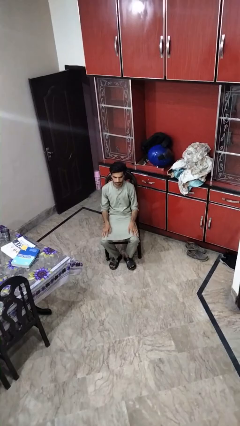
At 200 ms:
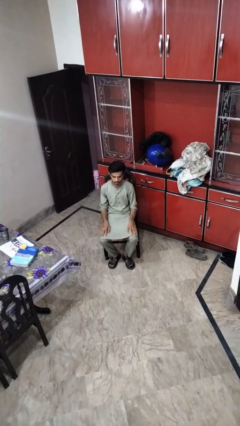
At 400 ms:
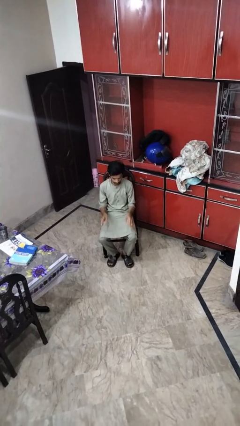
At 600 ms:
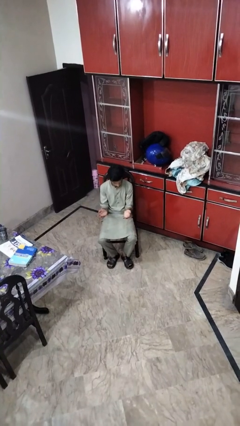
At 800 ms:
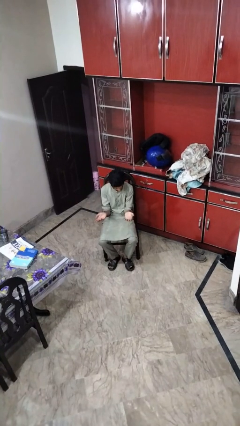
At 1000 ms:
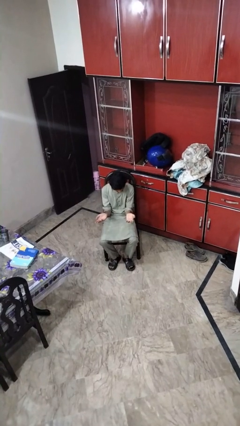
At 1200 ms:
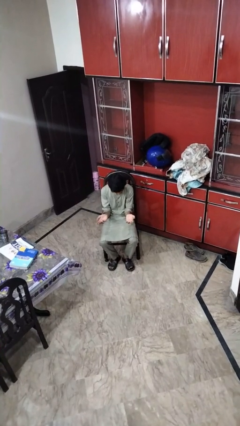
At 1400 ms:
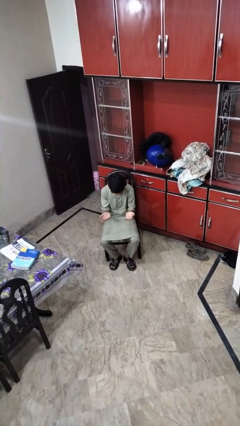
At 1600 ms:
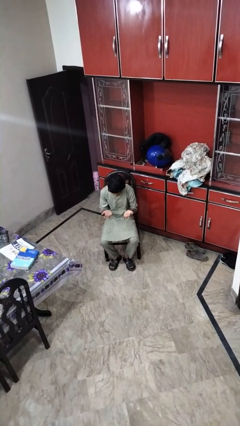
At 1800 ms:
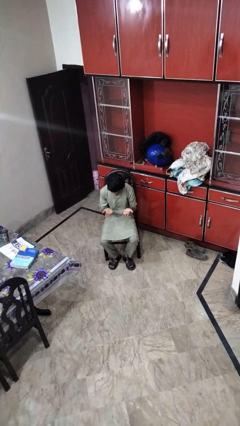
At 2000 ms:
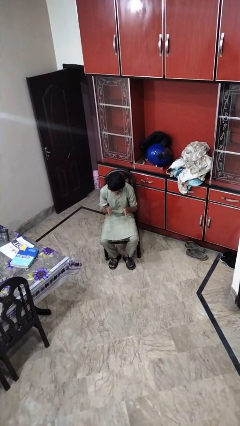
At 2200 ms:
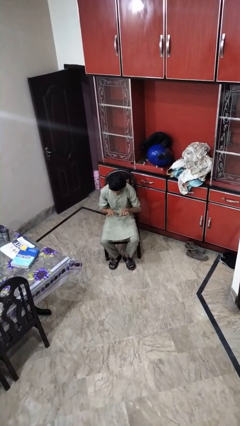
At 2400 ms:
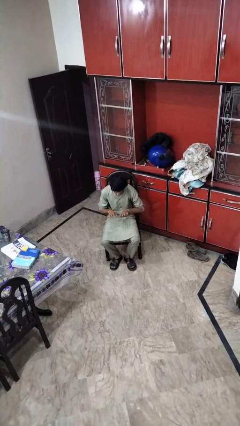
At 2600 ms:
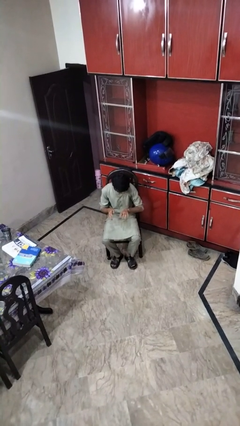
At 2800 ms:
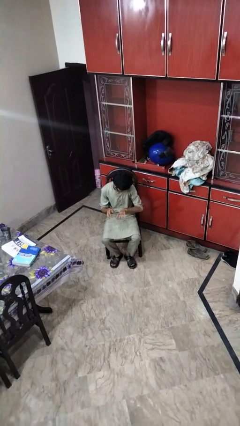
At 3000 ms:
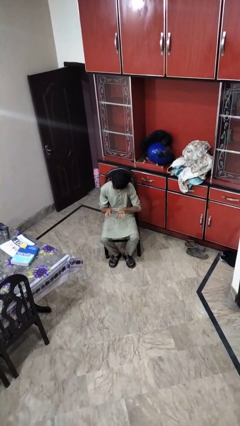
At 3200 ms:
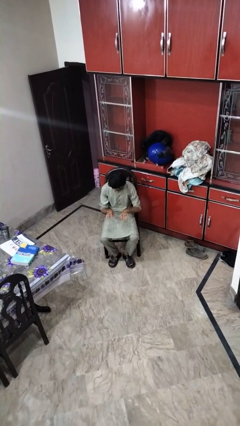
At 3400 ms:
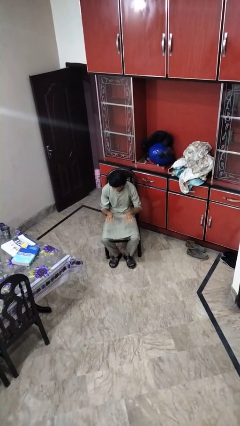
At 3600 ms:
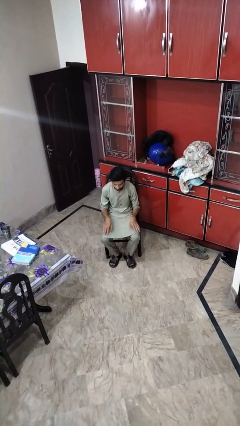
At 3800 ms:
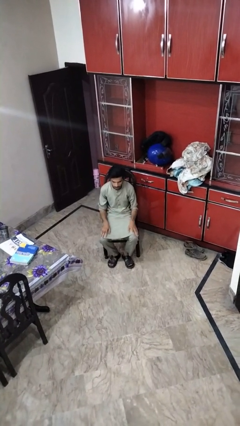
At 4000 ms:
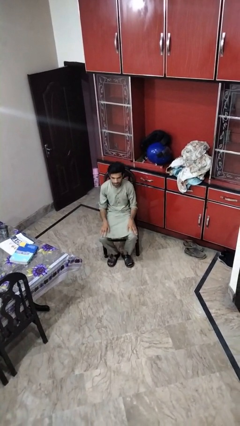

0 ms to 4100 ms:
person looks at hands in lap

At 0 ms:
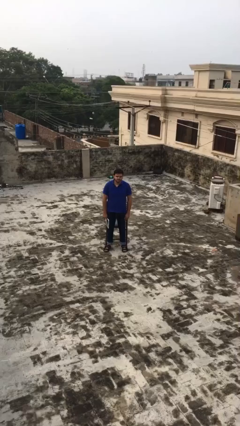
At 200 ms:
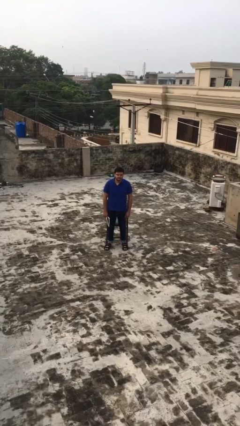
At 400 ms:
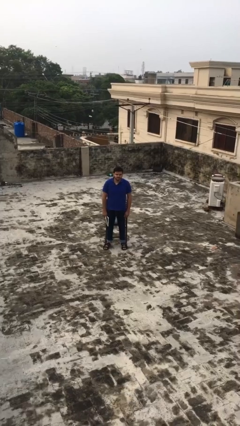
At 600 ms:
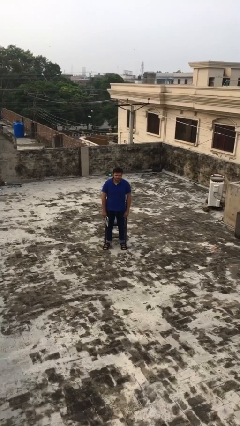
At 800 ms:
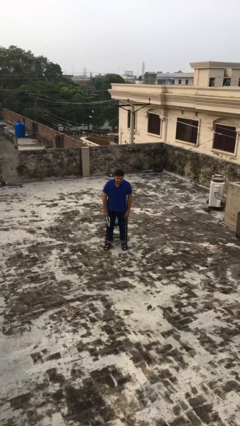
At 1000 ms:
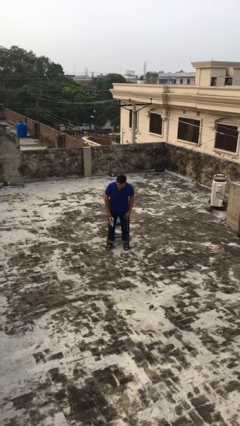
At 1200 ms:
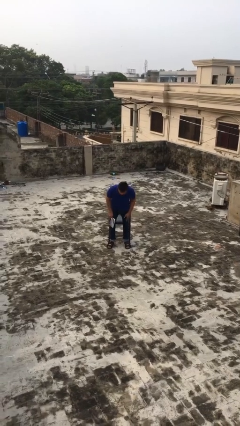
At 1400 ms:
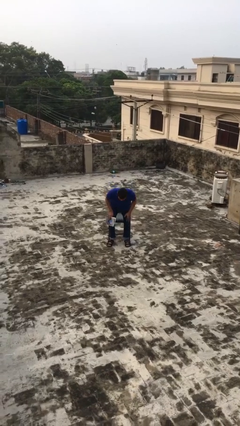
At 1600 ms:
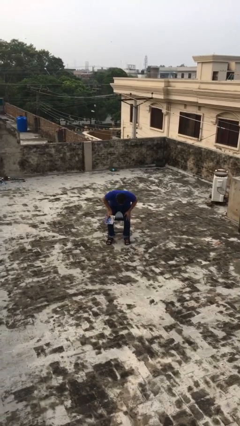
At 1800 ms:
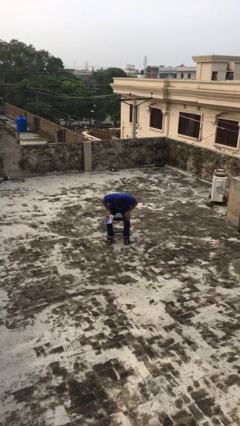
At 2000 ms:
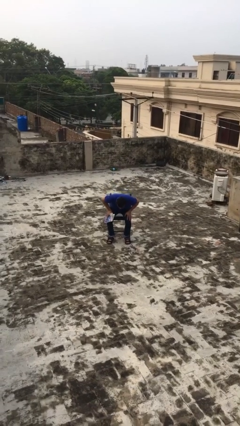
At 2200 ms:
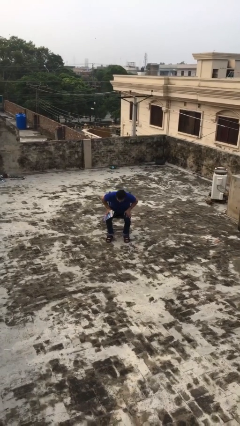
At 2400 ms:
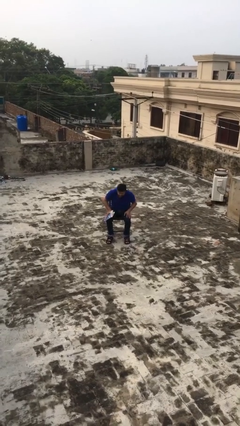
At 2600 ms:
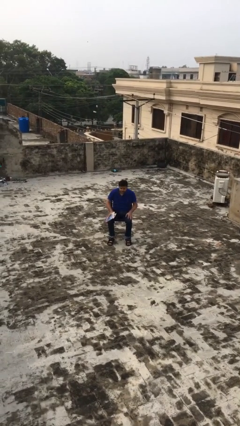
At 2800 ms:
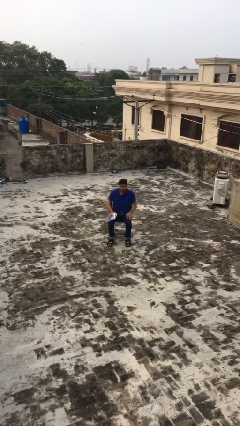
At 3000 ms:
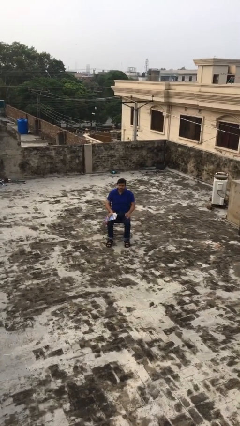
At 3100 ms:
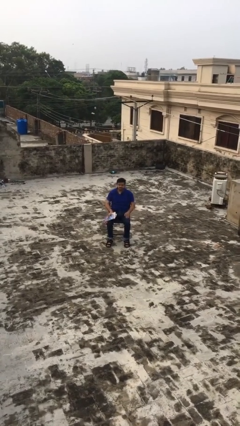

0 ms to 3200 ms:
person sits down

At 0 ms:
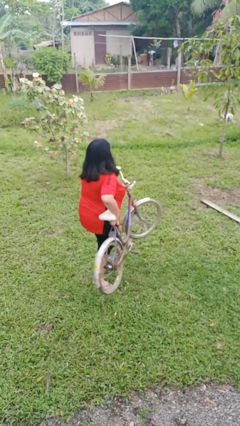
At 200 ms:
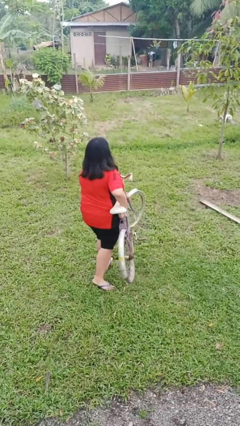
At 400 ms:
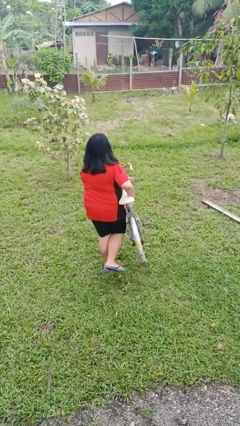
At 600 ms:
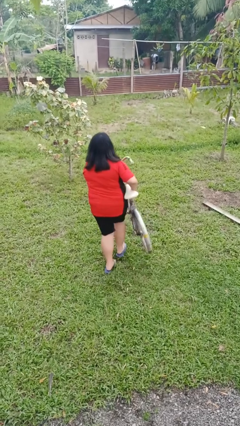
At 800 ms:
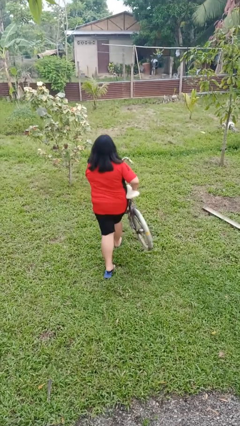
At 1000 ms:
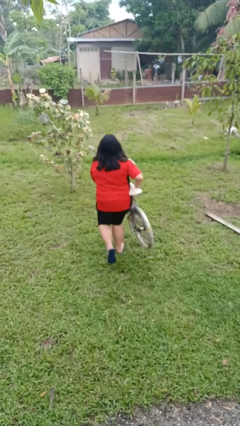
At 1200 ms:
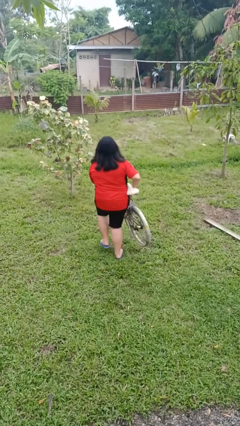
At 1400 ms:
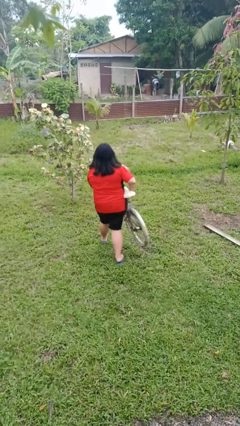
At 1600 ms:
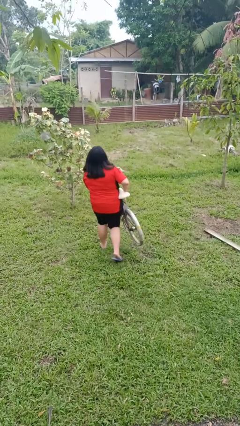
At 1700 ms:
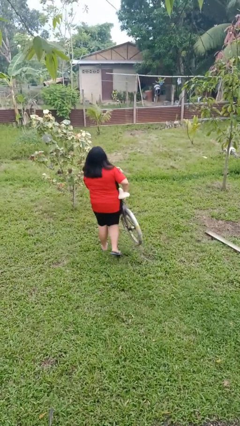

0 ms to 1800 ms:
person carries bicycle

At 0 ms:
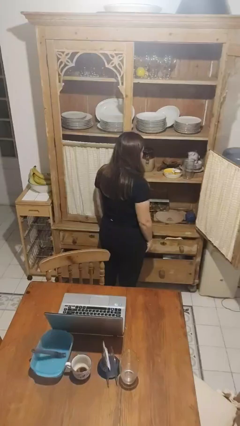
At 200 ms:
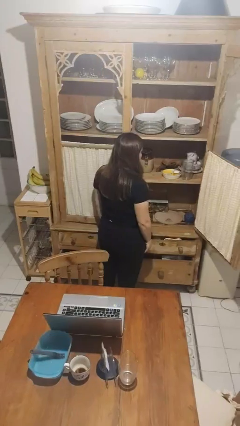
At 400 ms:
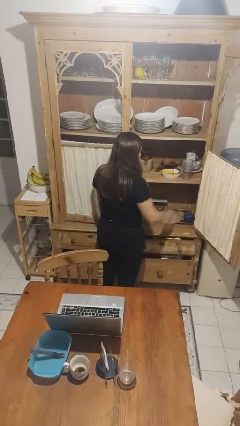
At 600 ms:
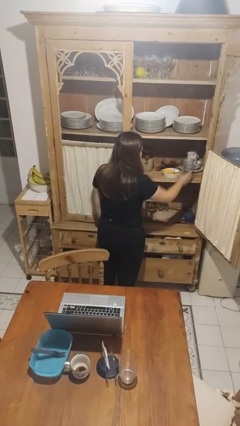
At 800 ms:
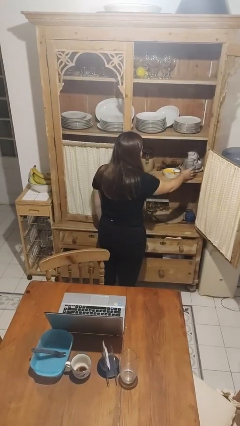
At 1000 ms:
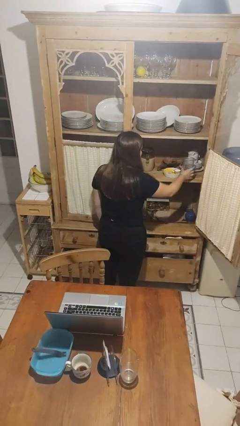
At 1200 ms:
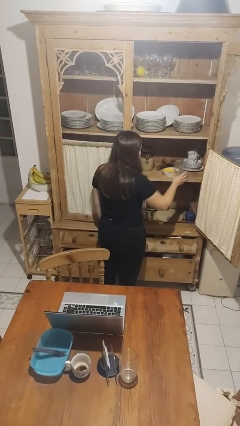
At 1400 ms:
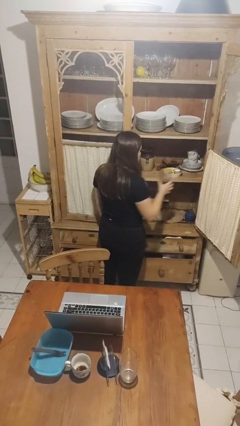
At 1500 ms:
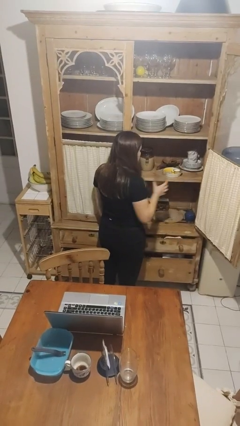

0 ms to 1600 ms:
person takes object from cabinet

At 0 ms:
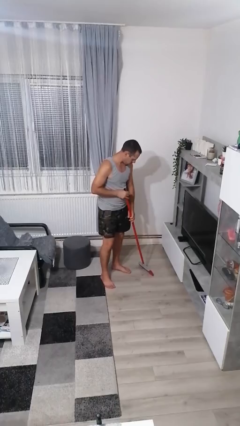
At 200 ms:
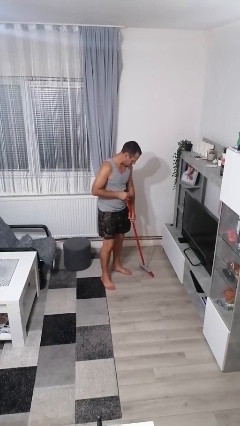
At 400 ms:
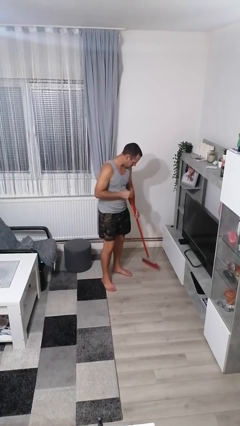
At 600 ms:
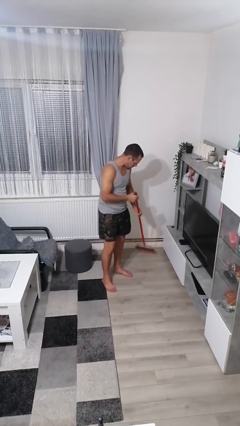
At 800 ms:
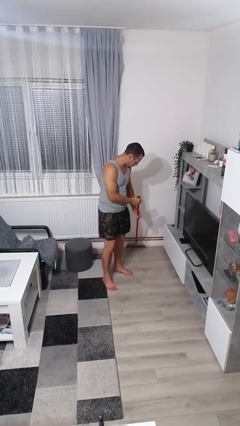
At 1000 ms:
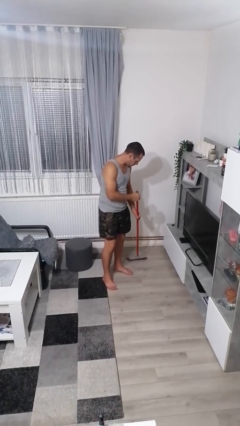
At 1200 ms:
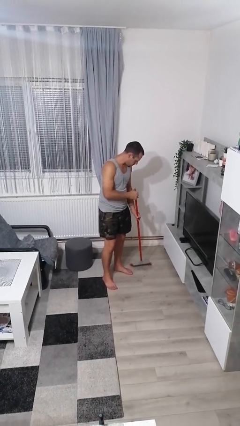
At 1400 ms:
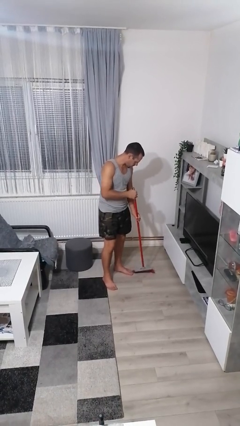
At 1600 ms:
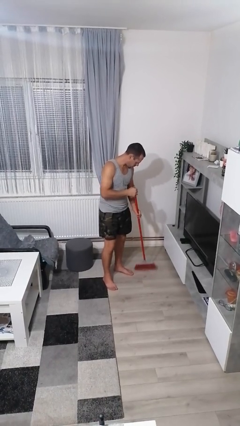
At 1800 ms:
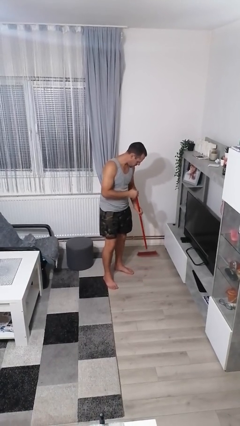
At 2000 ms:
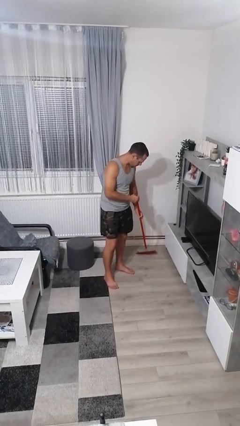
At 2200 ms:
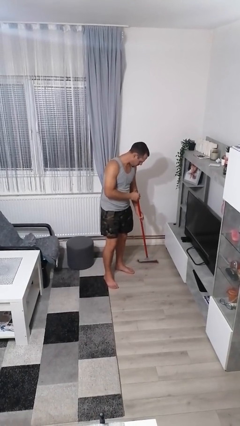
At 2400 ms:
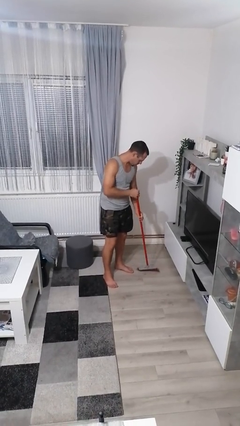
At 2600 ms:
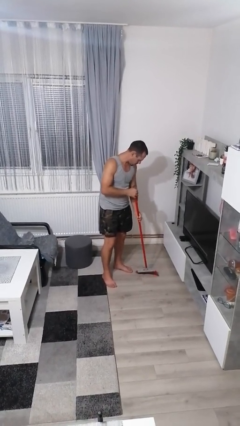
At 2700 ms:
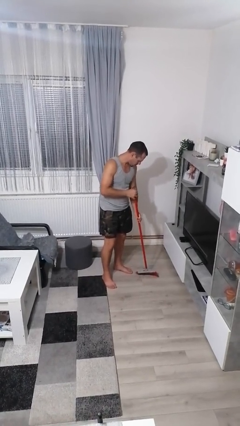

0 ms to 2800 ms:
person sweeps floor

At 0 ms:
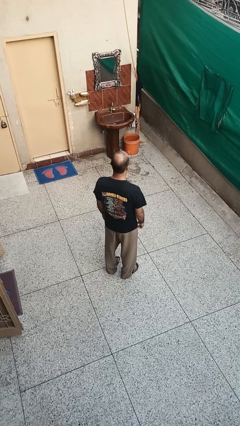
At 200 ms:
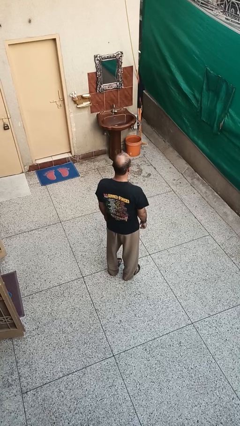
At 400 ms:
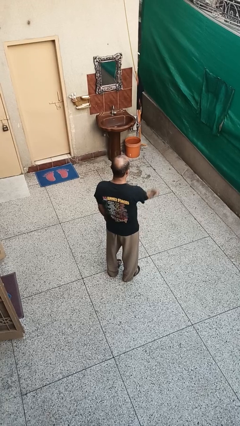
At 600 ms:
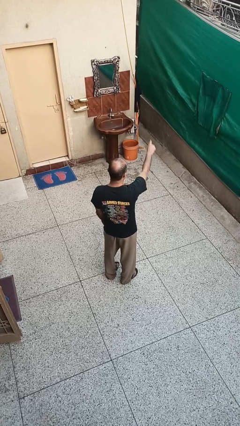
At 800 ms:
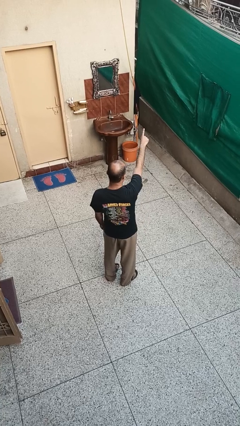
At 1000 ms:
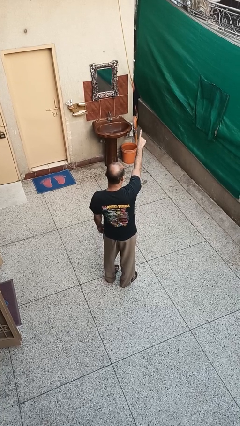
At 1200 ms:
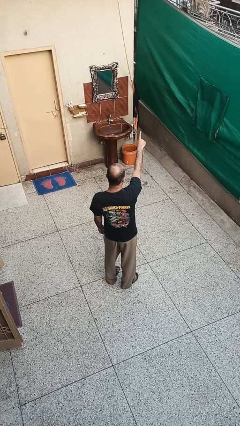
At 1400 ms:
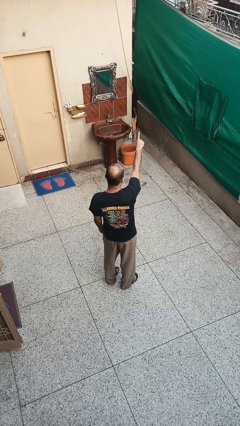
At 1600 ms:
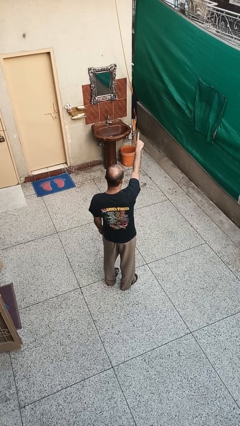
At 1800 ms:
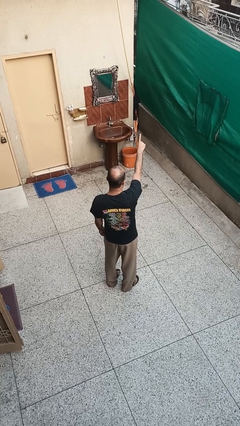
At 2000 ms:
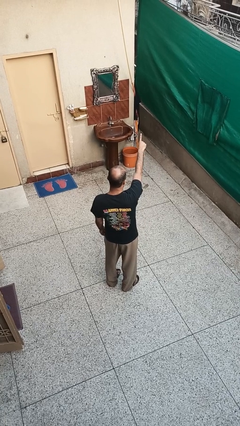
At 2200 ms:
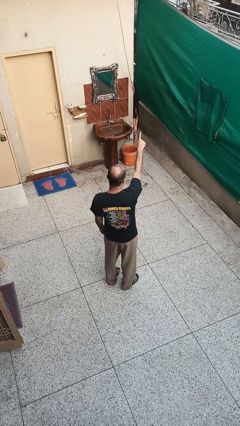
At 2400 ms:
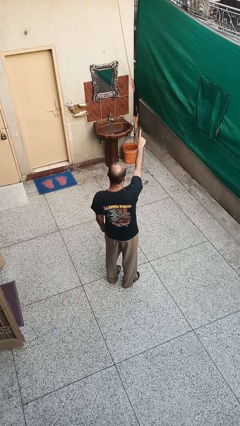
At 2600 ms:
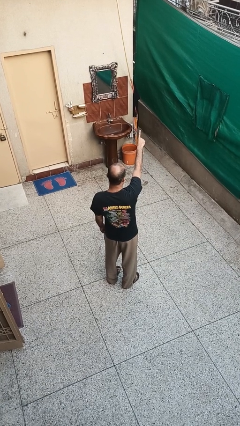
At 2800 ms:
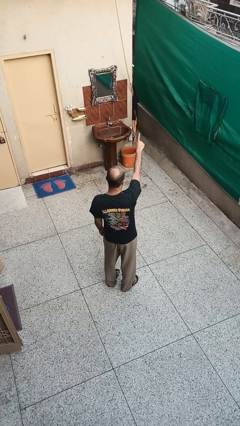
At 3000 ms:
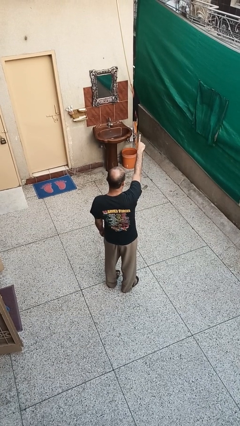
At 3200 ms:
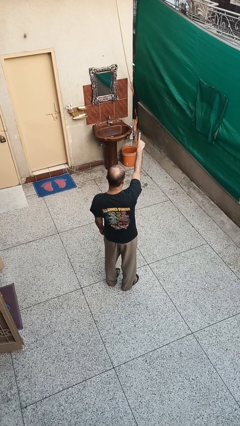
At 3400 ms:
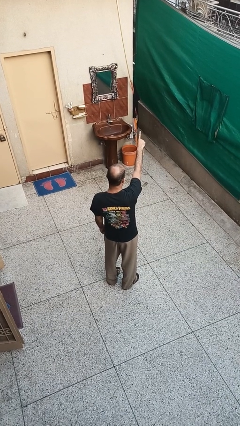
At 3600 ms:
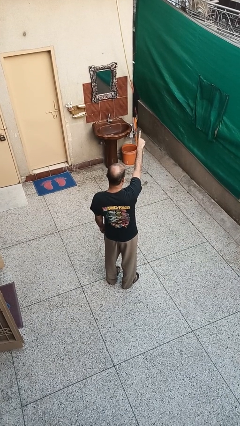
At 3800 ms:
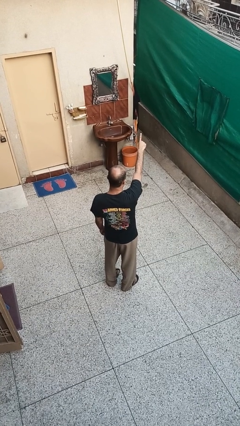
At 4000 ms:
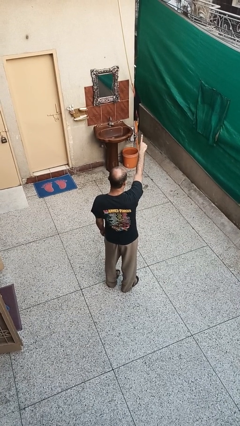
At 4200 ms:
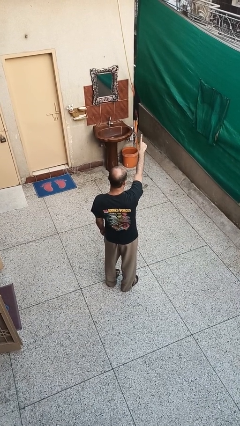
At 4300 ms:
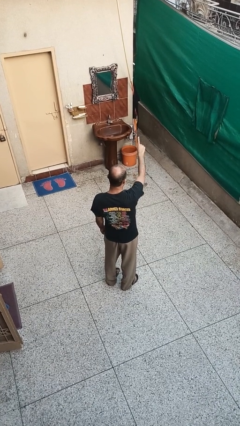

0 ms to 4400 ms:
person points at person
